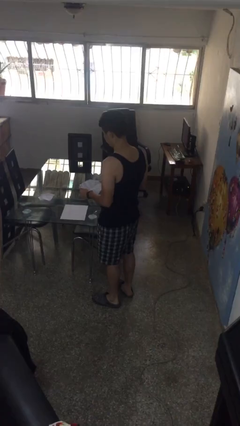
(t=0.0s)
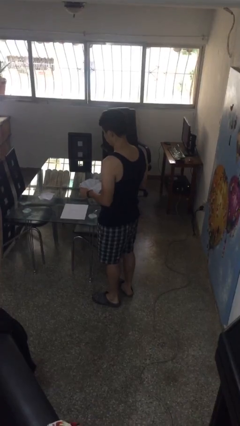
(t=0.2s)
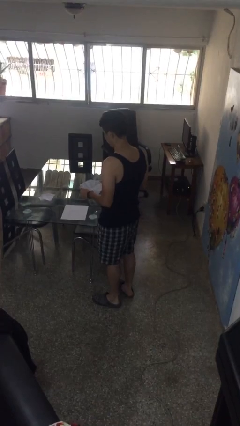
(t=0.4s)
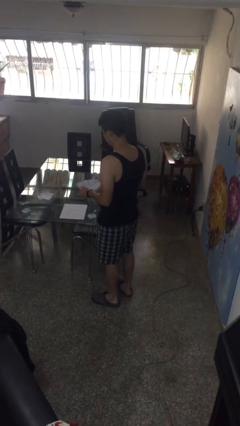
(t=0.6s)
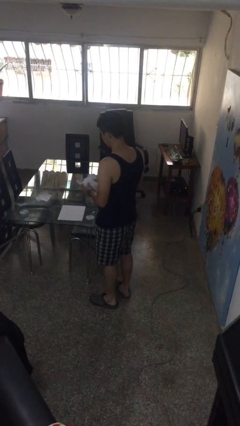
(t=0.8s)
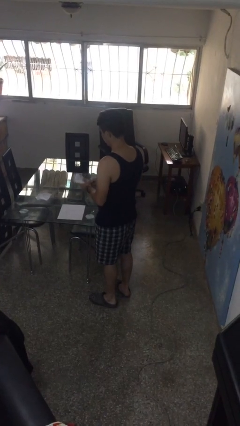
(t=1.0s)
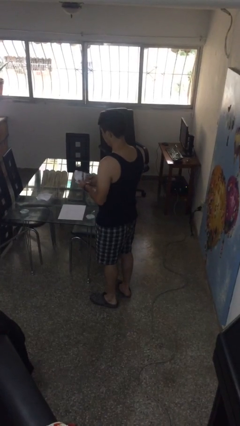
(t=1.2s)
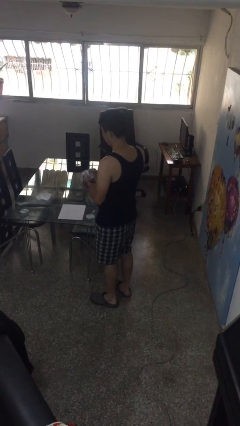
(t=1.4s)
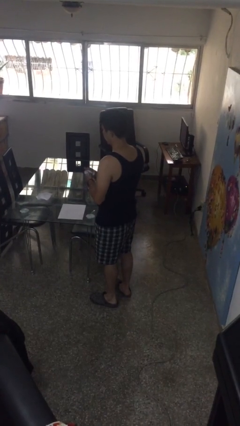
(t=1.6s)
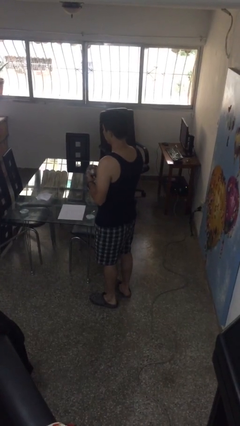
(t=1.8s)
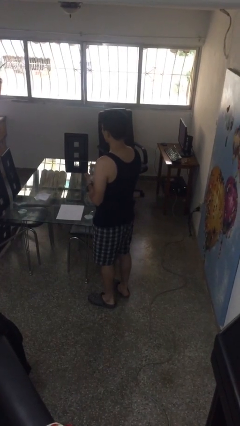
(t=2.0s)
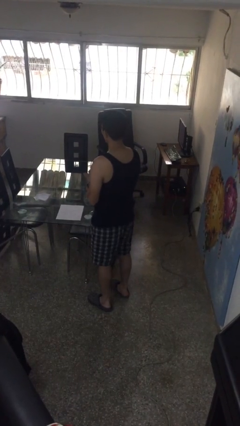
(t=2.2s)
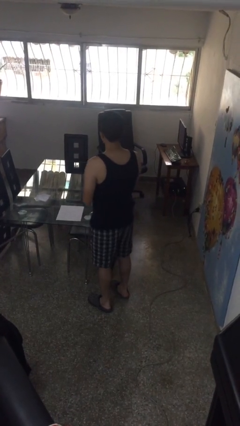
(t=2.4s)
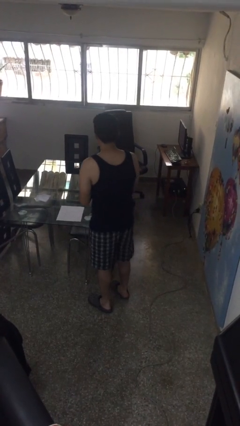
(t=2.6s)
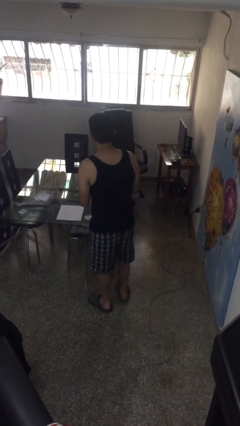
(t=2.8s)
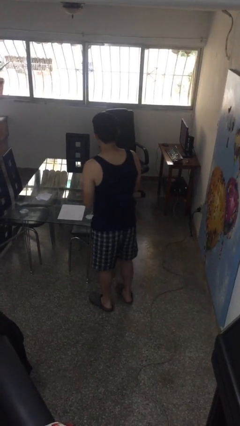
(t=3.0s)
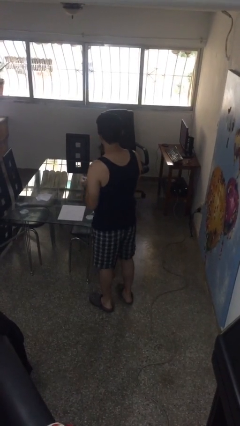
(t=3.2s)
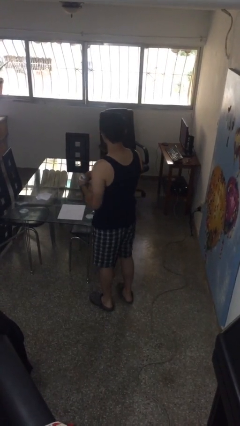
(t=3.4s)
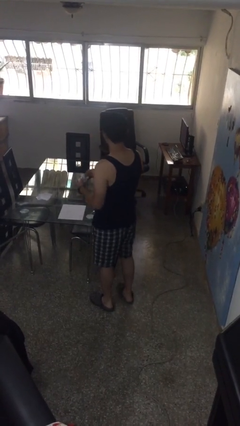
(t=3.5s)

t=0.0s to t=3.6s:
person crumples paper

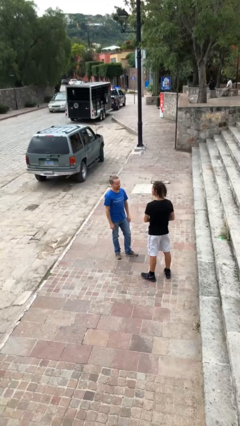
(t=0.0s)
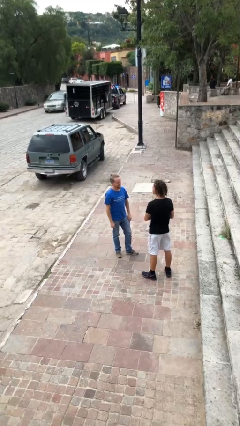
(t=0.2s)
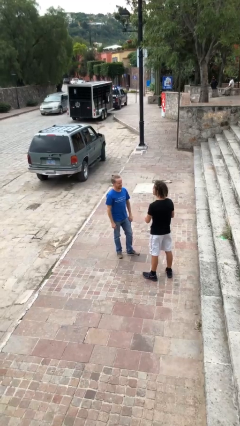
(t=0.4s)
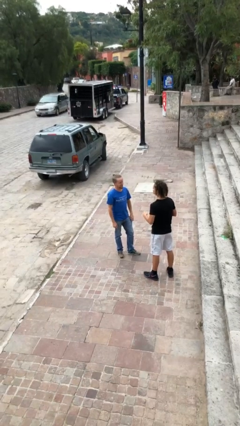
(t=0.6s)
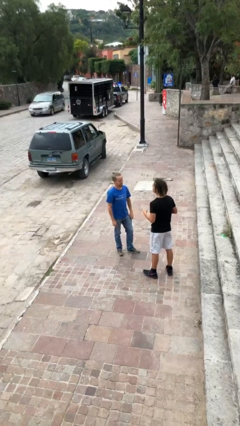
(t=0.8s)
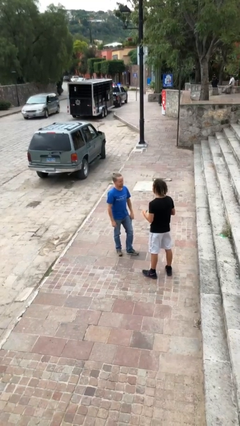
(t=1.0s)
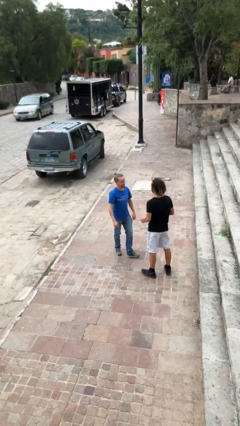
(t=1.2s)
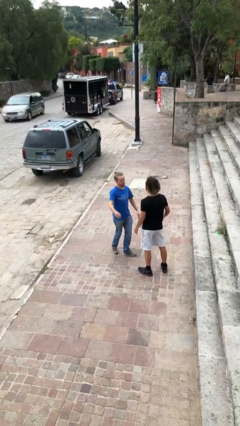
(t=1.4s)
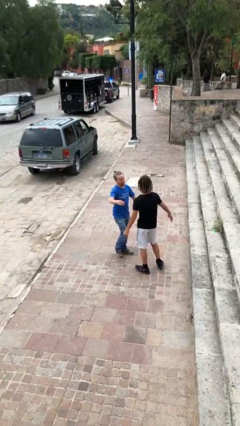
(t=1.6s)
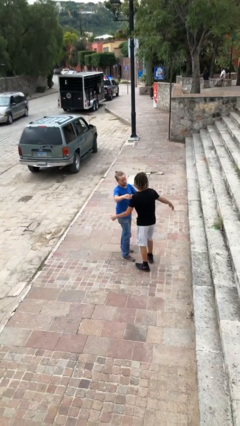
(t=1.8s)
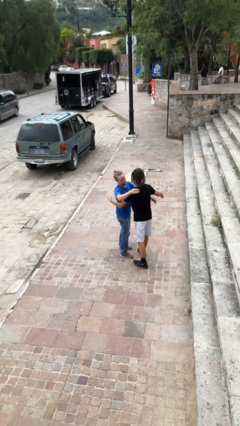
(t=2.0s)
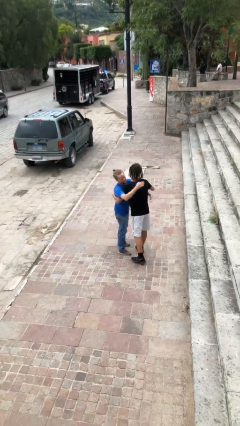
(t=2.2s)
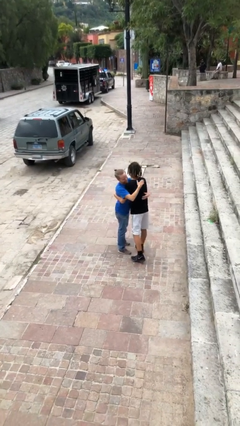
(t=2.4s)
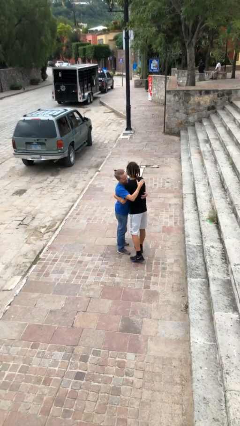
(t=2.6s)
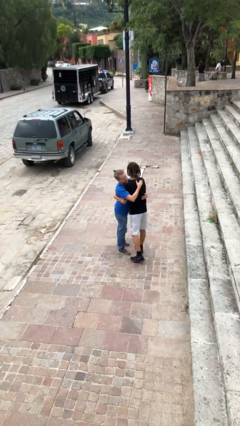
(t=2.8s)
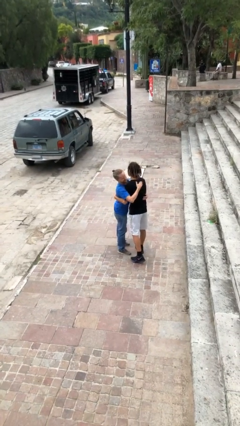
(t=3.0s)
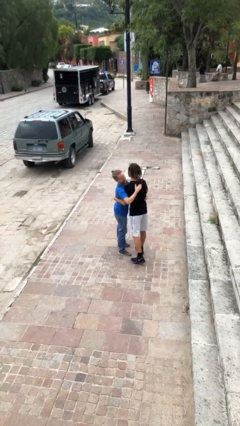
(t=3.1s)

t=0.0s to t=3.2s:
person embraces person

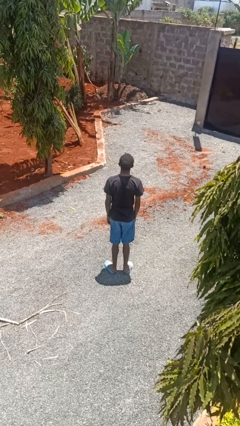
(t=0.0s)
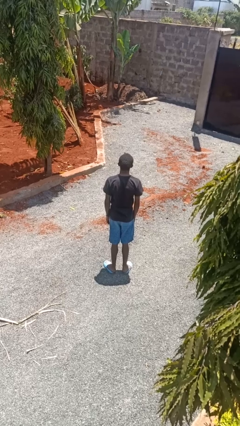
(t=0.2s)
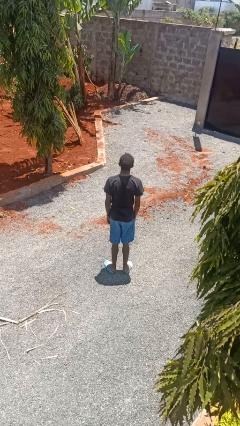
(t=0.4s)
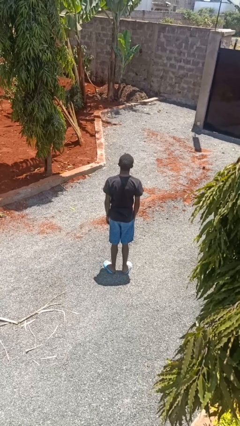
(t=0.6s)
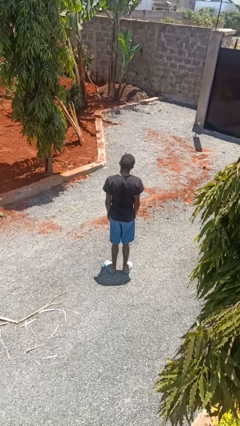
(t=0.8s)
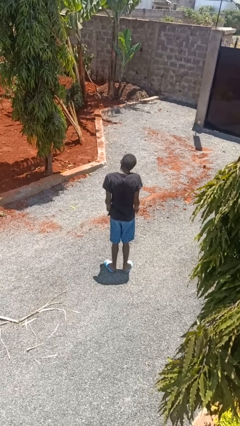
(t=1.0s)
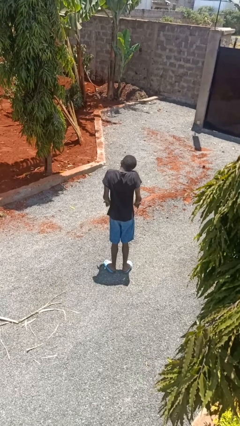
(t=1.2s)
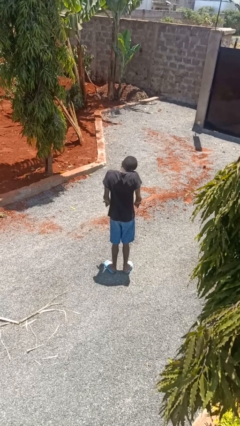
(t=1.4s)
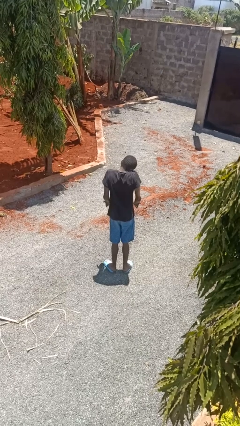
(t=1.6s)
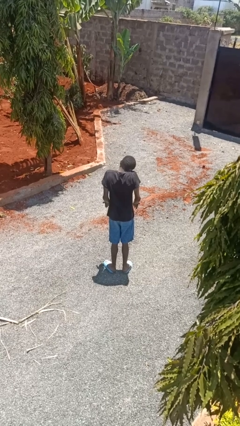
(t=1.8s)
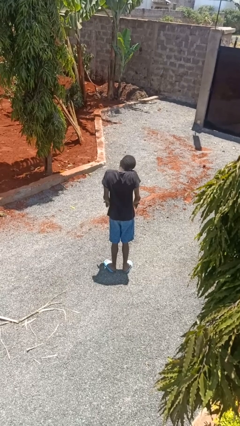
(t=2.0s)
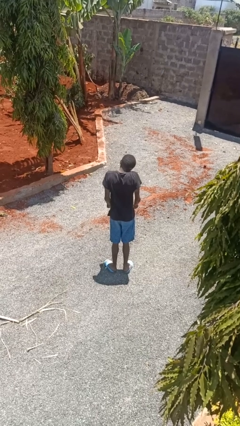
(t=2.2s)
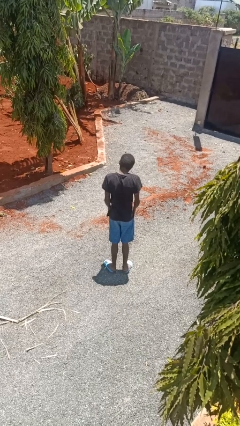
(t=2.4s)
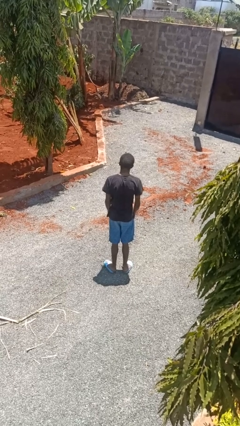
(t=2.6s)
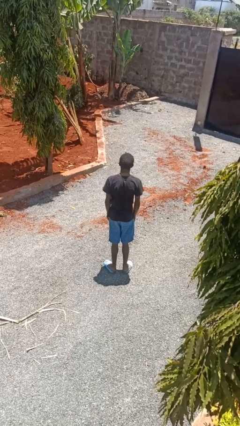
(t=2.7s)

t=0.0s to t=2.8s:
person shrugs

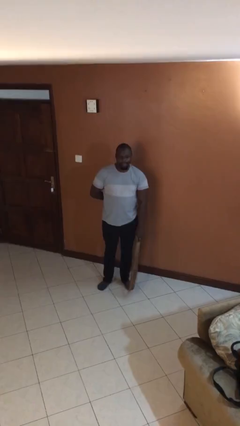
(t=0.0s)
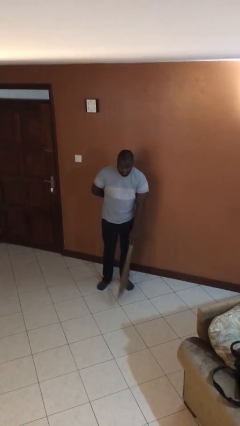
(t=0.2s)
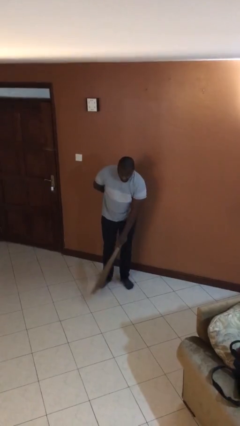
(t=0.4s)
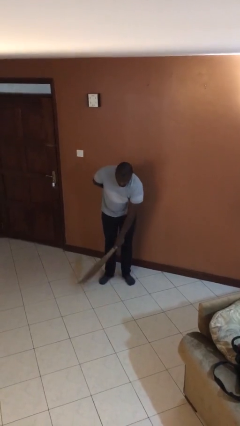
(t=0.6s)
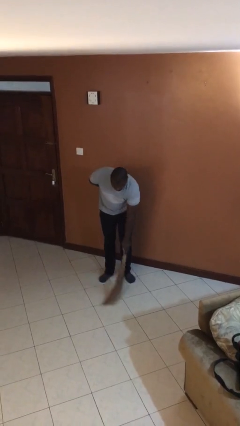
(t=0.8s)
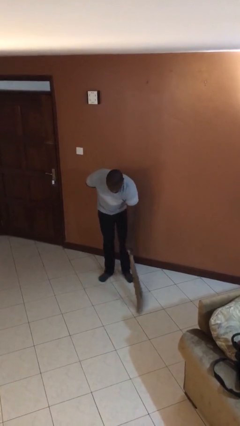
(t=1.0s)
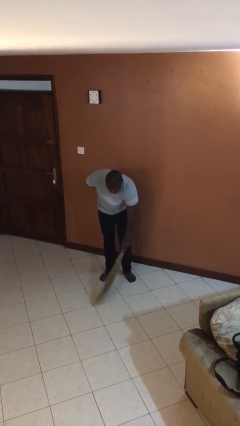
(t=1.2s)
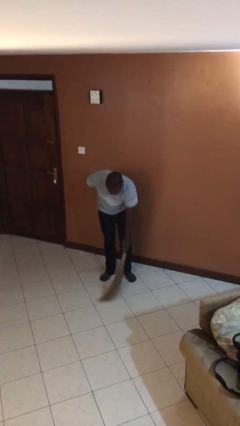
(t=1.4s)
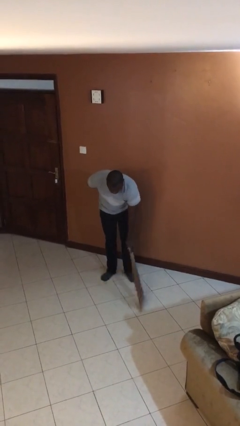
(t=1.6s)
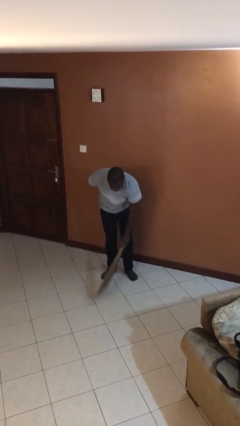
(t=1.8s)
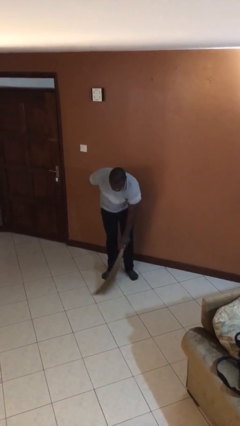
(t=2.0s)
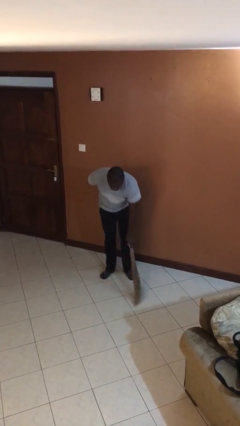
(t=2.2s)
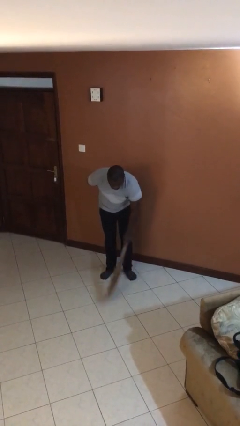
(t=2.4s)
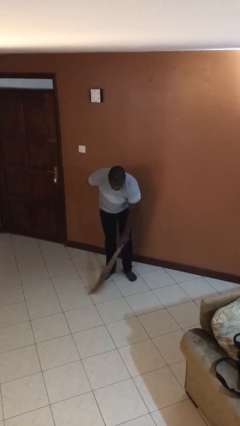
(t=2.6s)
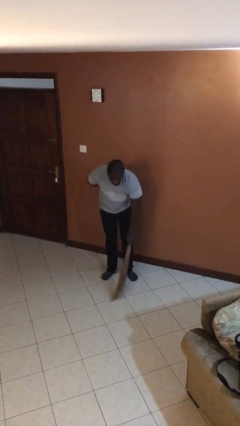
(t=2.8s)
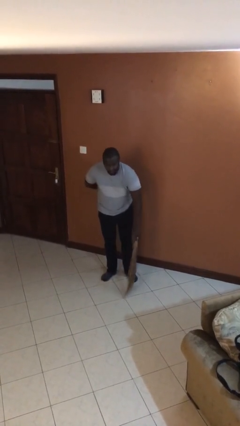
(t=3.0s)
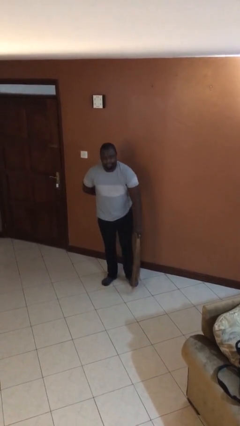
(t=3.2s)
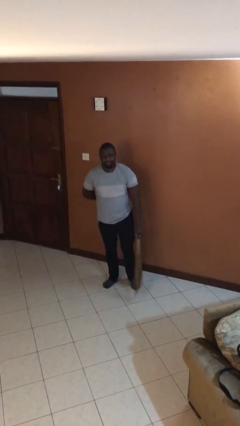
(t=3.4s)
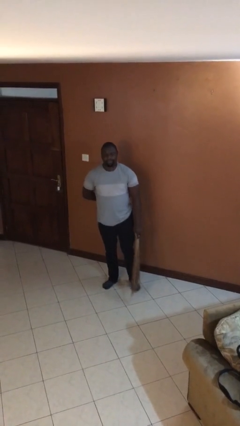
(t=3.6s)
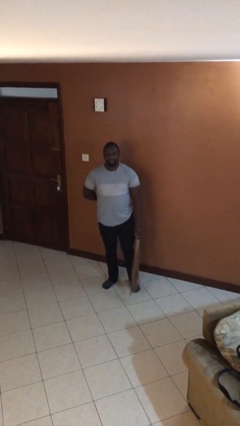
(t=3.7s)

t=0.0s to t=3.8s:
person sweeps floor

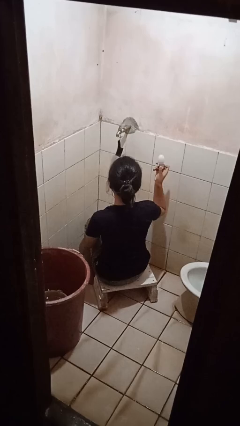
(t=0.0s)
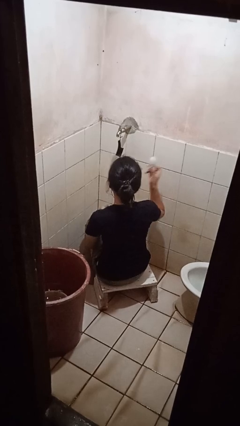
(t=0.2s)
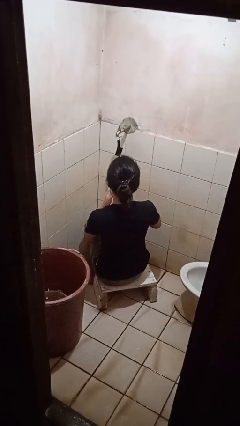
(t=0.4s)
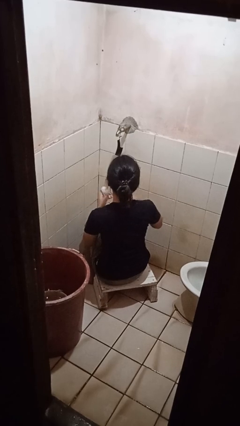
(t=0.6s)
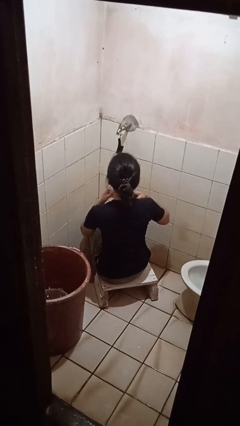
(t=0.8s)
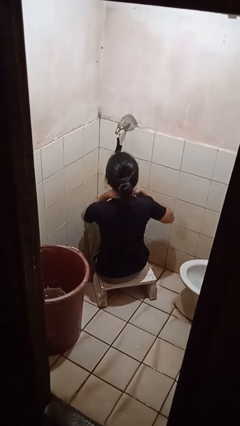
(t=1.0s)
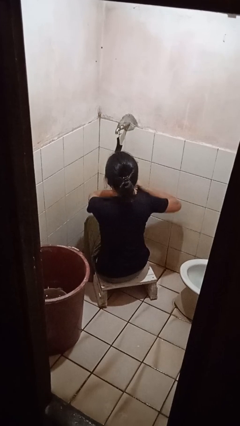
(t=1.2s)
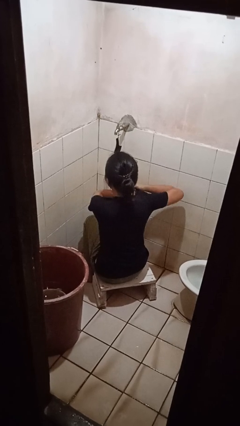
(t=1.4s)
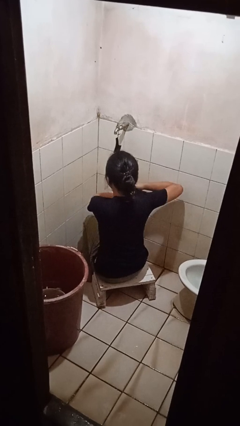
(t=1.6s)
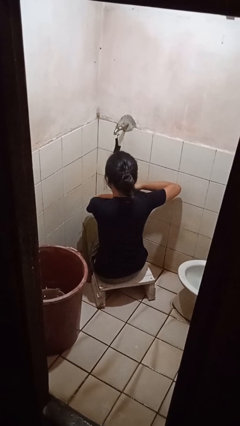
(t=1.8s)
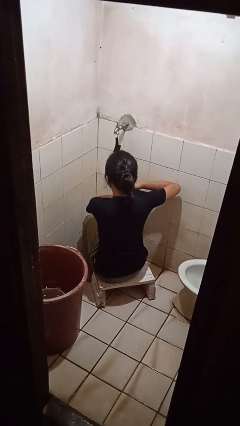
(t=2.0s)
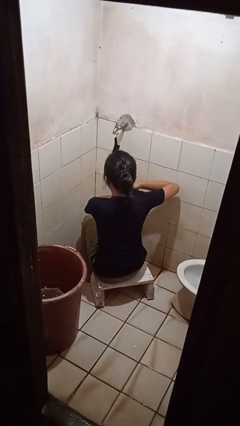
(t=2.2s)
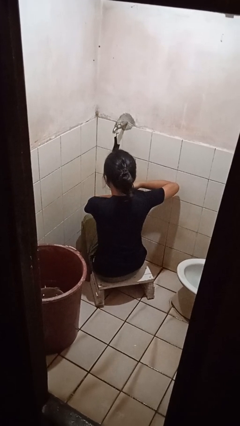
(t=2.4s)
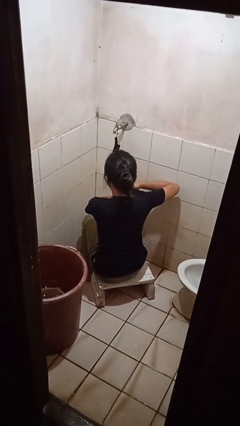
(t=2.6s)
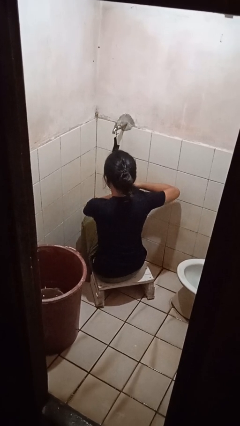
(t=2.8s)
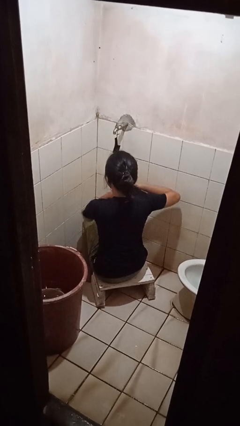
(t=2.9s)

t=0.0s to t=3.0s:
person applies deodorant

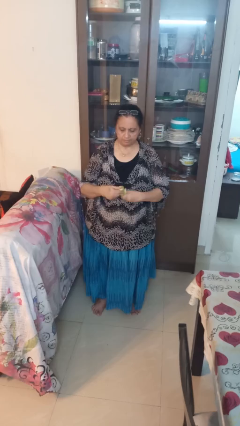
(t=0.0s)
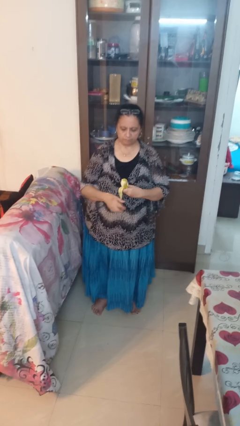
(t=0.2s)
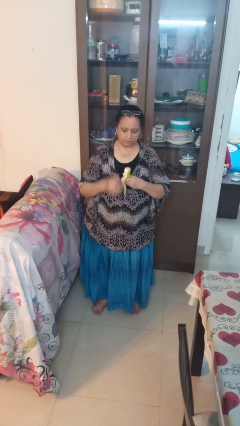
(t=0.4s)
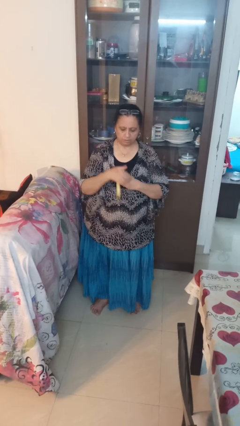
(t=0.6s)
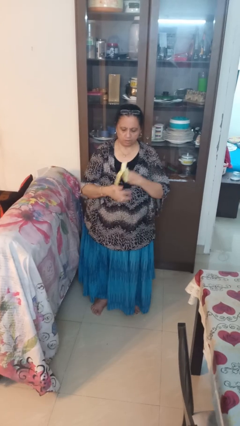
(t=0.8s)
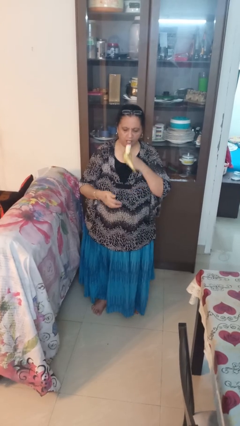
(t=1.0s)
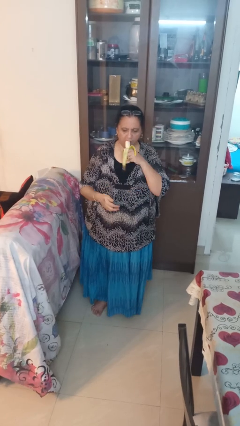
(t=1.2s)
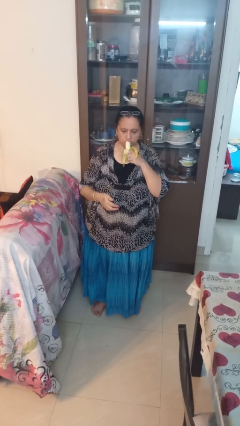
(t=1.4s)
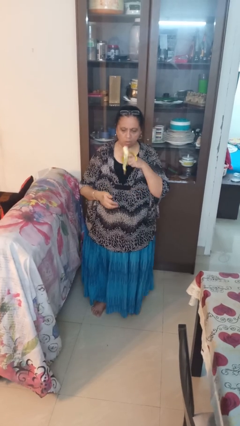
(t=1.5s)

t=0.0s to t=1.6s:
person eats banana
